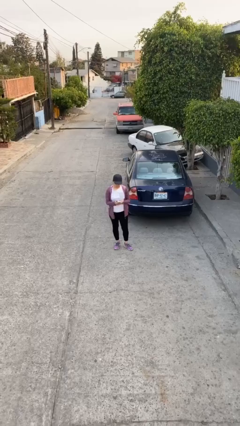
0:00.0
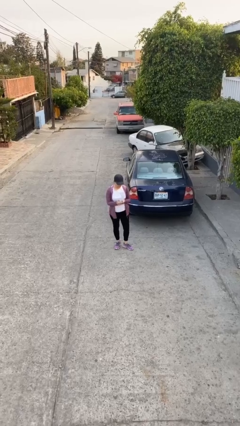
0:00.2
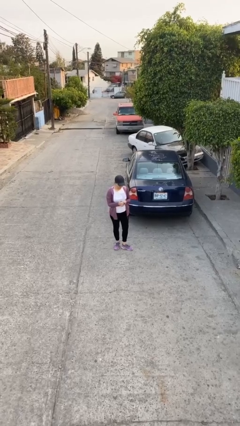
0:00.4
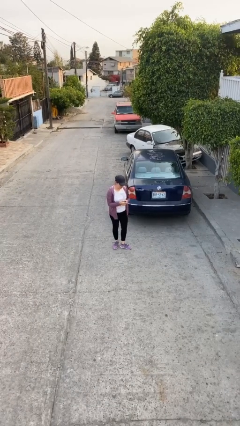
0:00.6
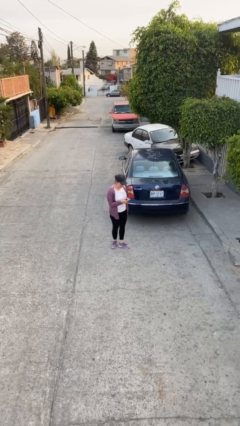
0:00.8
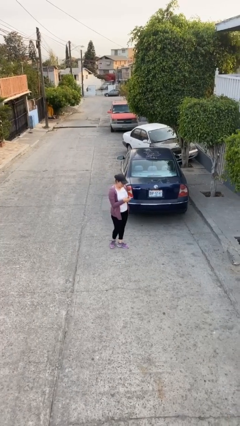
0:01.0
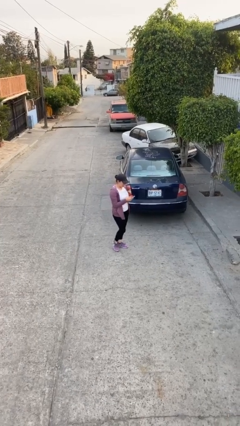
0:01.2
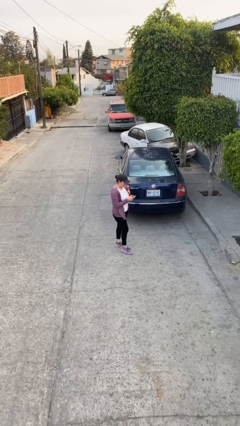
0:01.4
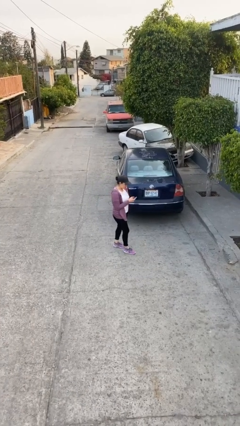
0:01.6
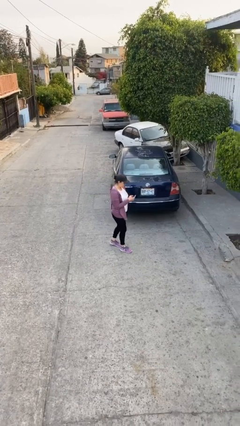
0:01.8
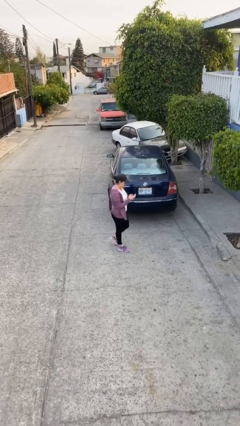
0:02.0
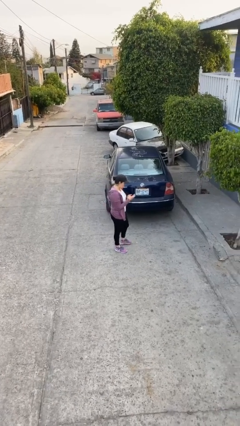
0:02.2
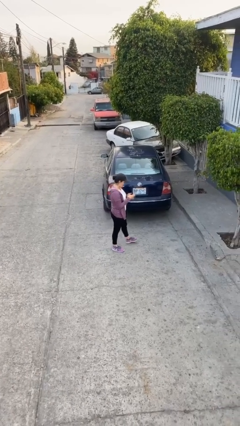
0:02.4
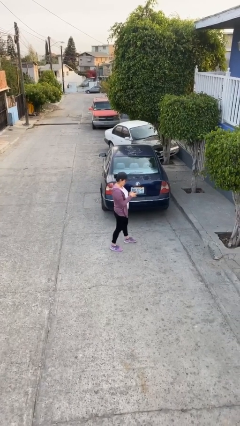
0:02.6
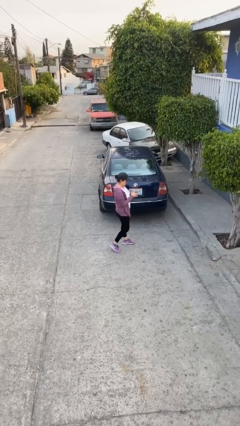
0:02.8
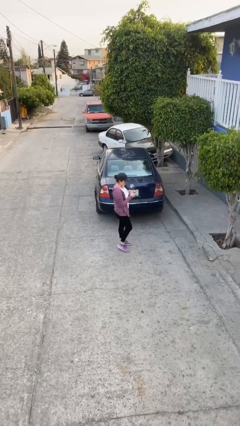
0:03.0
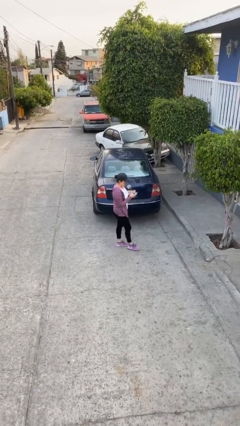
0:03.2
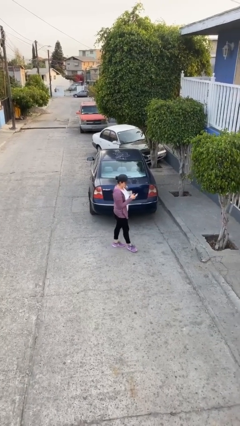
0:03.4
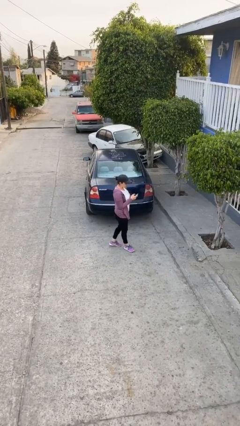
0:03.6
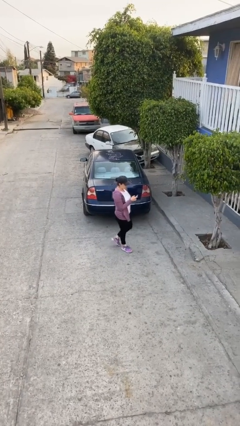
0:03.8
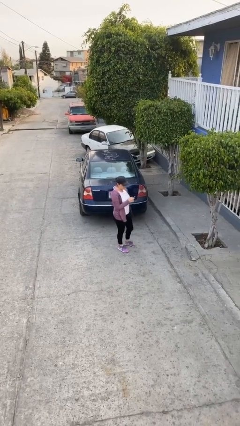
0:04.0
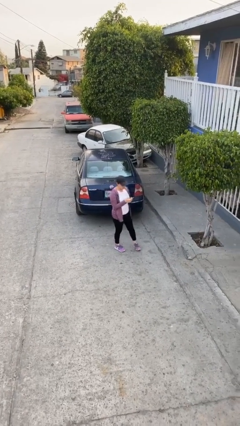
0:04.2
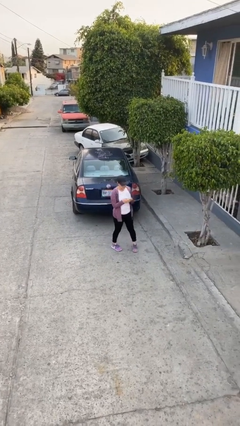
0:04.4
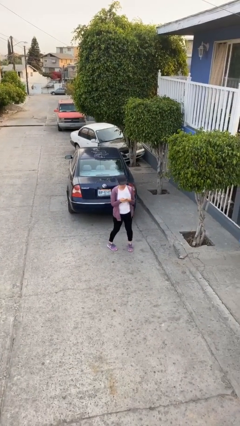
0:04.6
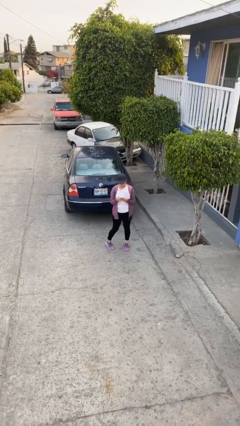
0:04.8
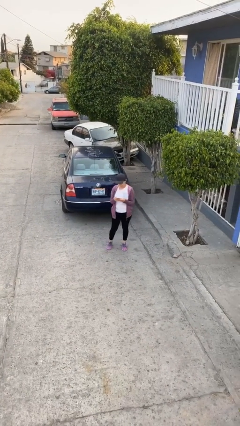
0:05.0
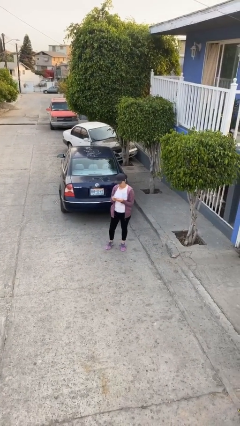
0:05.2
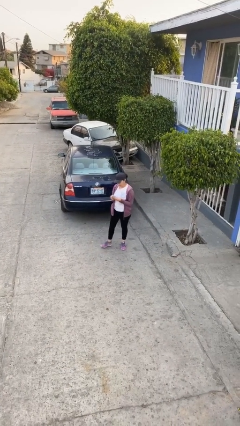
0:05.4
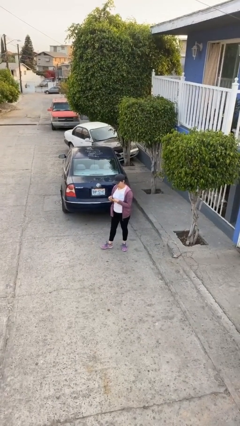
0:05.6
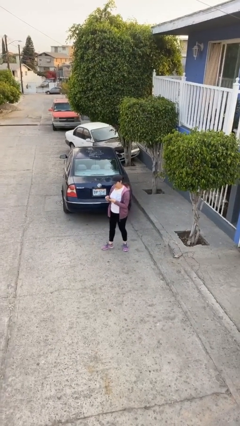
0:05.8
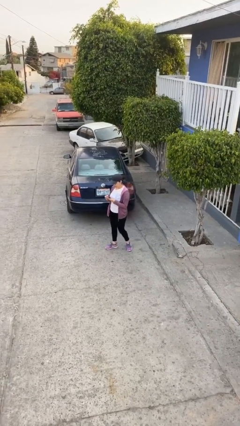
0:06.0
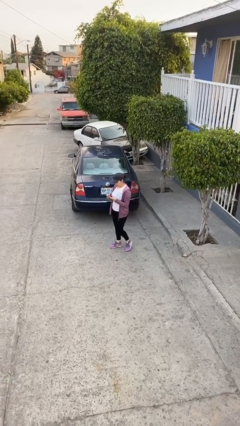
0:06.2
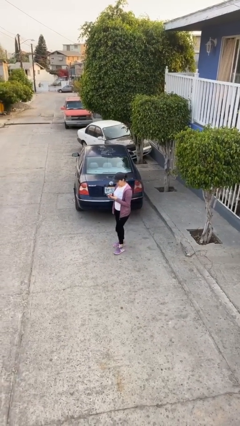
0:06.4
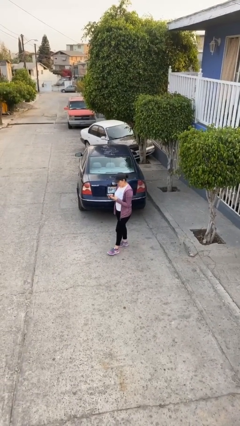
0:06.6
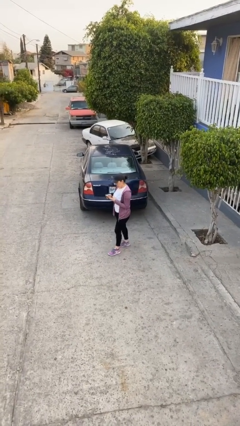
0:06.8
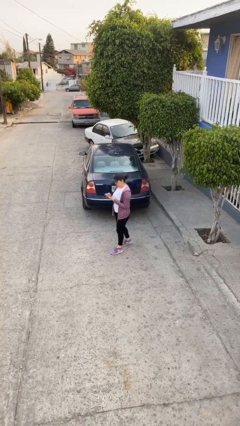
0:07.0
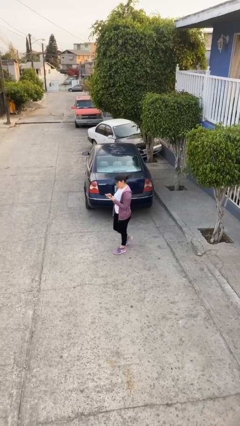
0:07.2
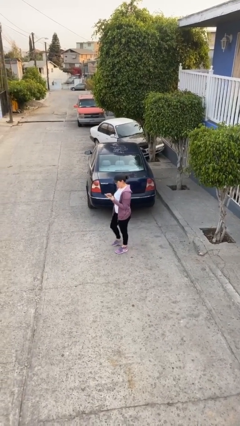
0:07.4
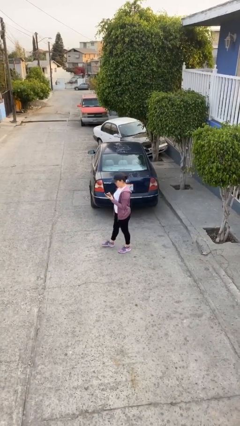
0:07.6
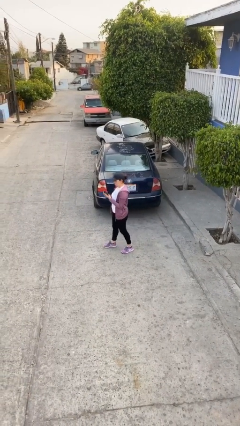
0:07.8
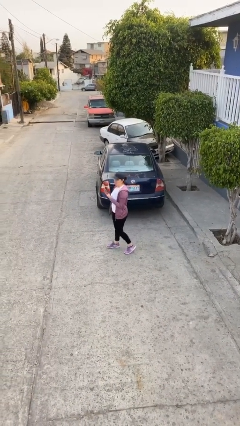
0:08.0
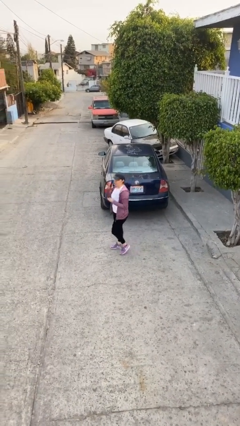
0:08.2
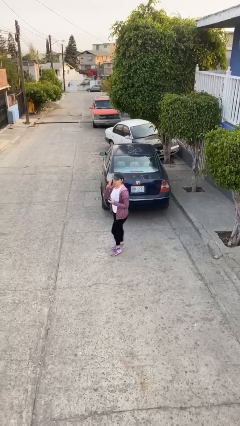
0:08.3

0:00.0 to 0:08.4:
person texts on phone

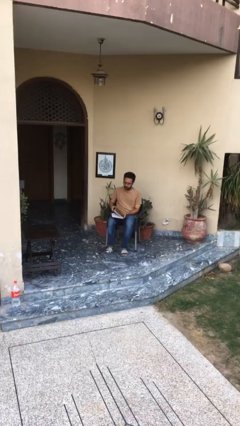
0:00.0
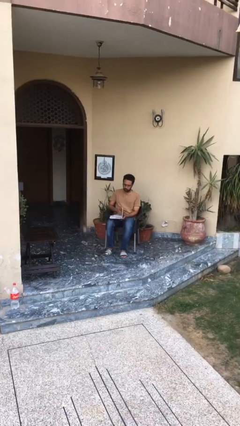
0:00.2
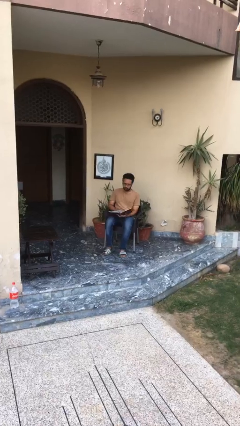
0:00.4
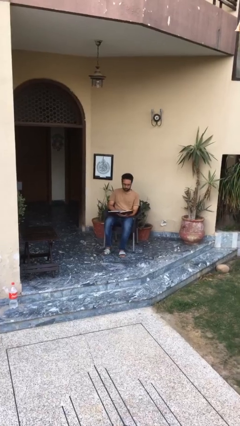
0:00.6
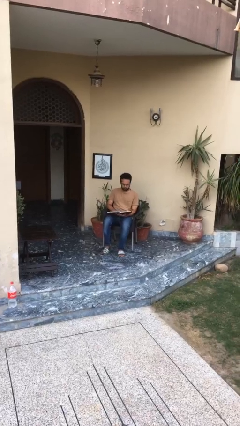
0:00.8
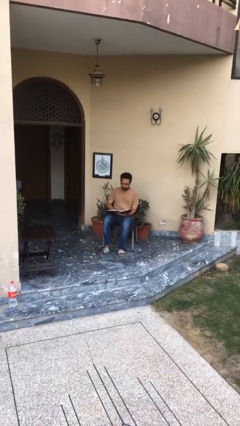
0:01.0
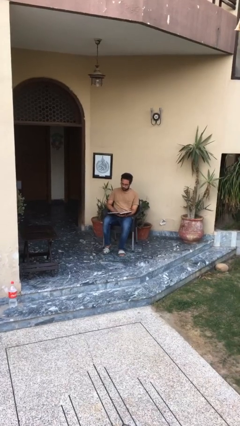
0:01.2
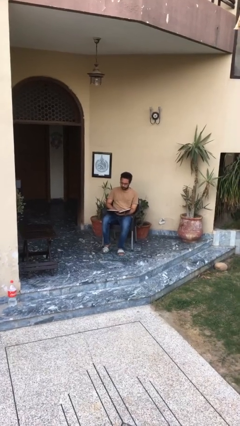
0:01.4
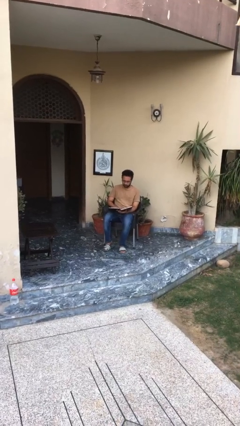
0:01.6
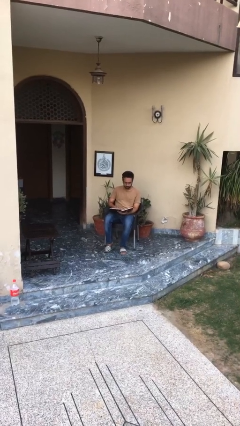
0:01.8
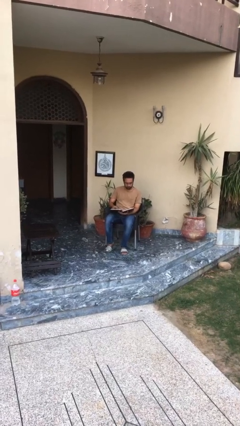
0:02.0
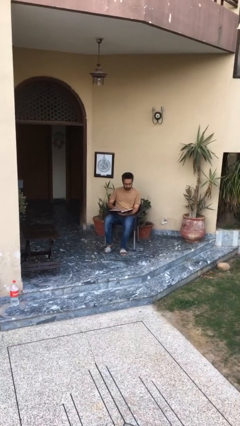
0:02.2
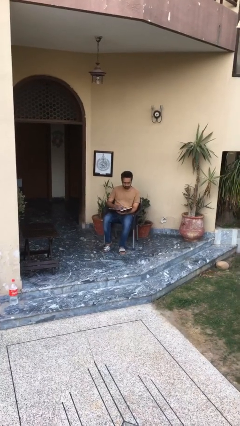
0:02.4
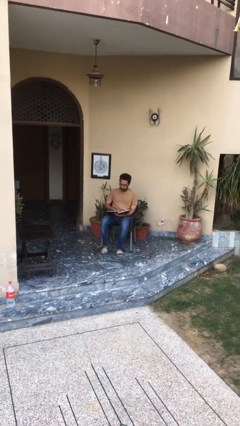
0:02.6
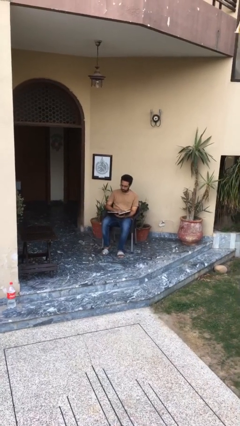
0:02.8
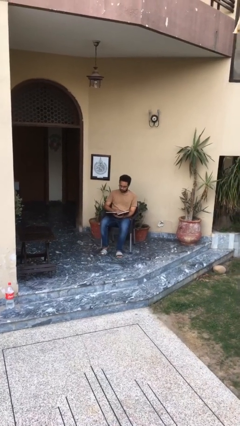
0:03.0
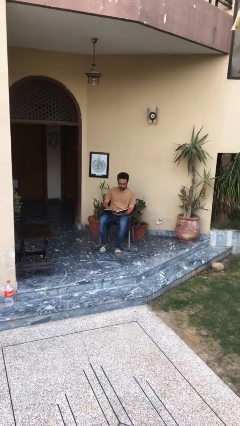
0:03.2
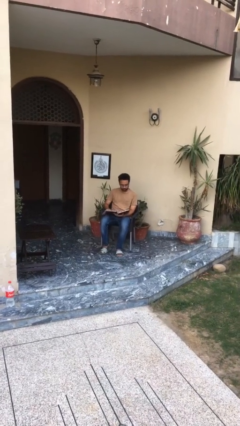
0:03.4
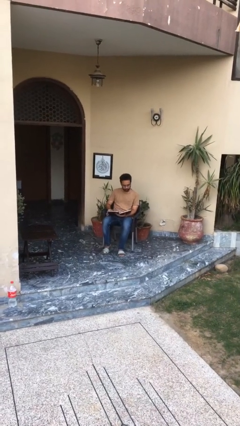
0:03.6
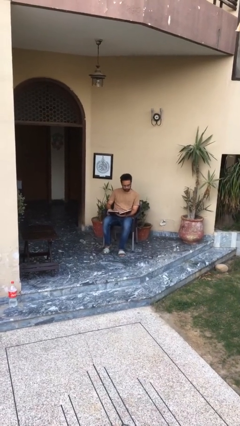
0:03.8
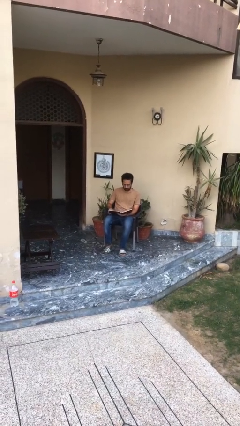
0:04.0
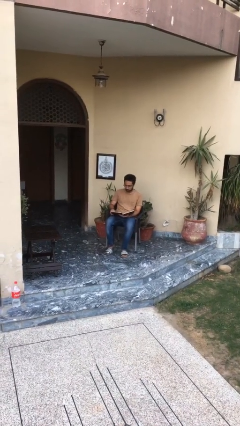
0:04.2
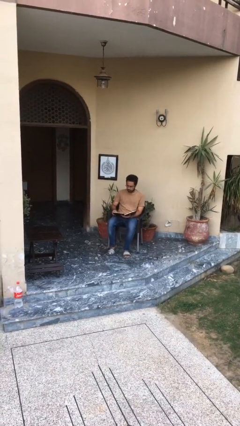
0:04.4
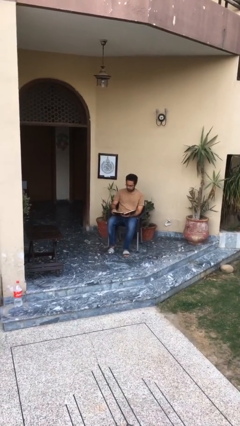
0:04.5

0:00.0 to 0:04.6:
person reads document

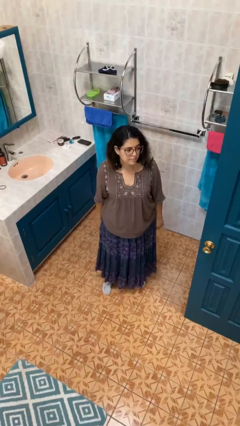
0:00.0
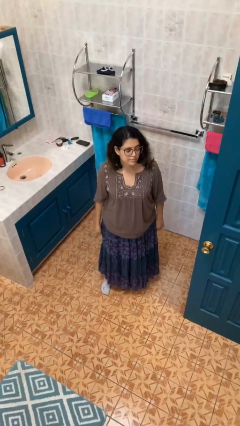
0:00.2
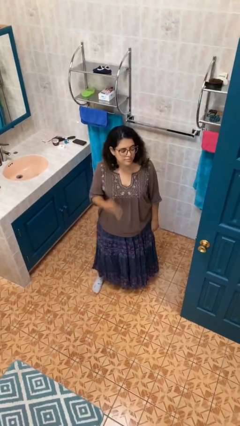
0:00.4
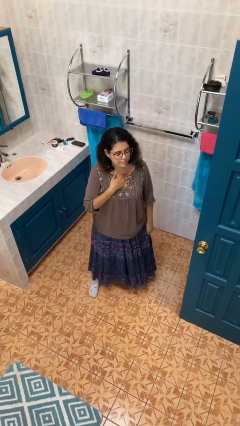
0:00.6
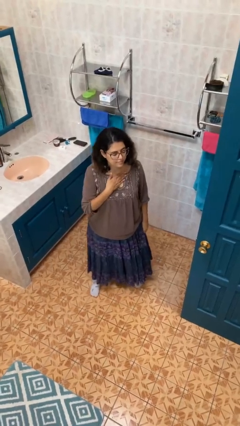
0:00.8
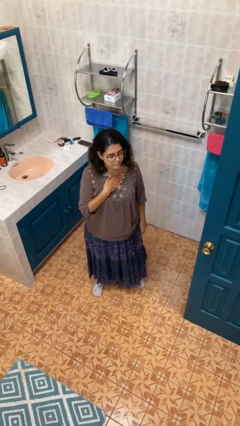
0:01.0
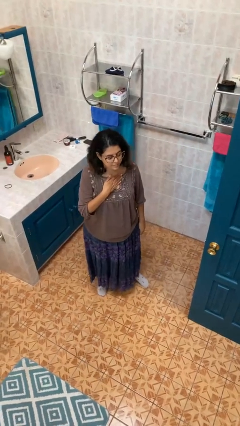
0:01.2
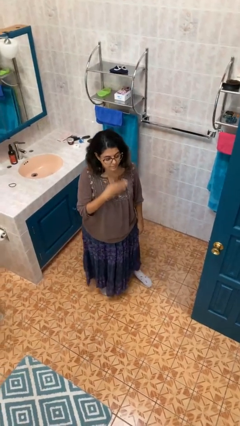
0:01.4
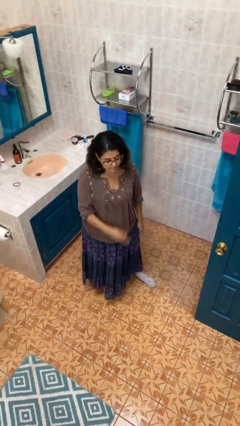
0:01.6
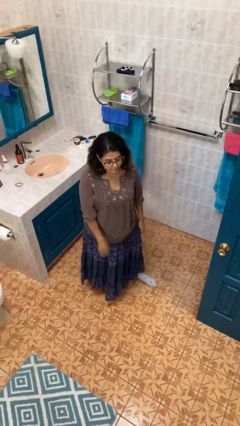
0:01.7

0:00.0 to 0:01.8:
person drums on chest

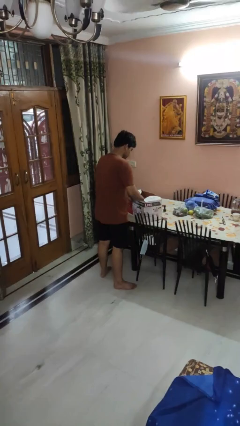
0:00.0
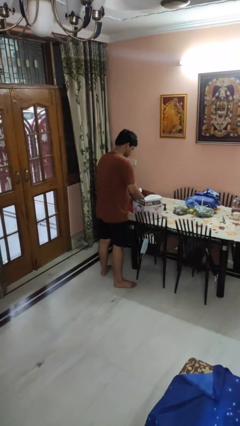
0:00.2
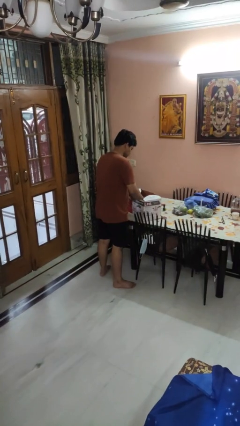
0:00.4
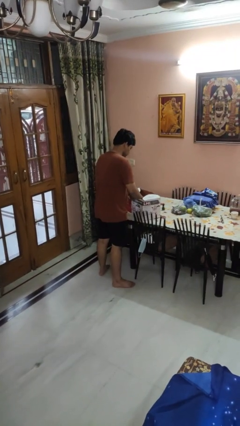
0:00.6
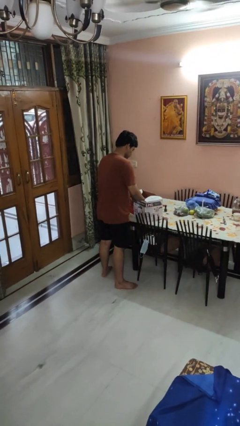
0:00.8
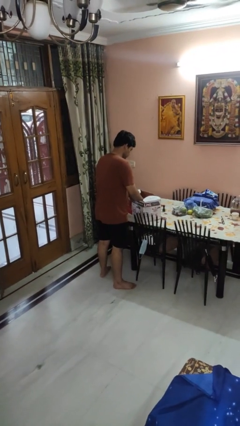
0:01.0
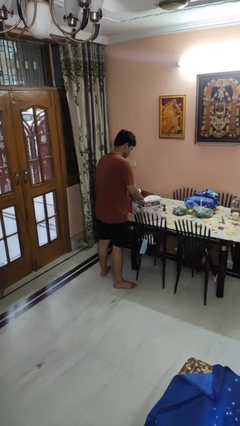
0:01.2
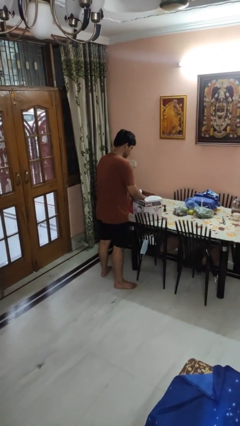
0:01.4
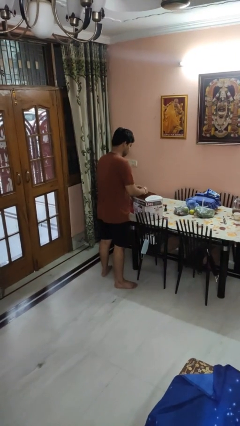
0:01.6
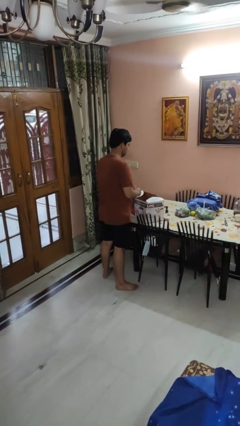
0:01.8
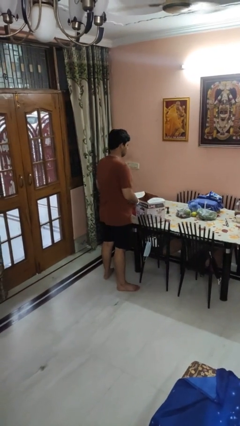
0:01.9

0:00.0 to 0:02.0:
person searches in box

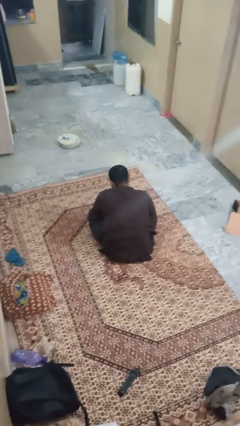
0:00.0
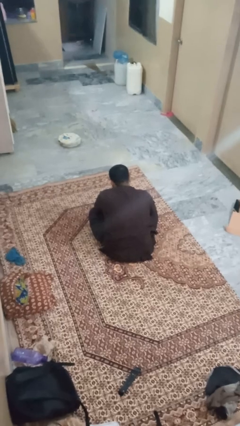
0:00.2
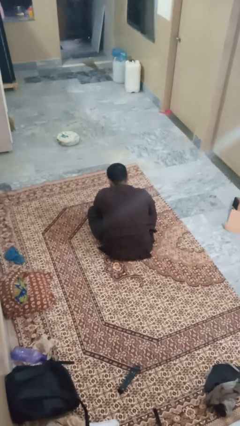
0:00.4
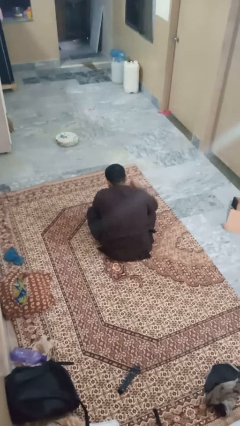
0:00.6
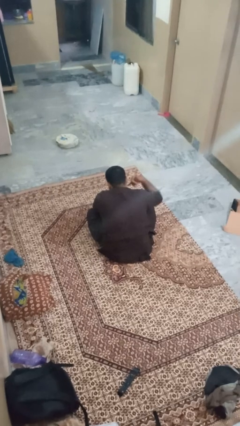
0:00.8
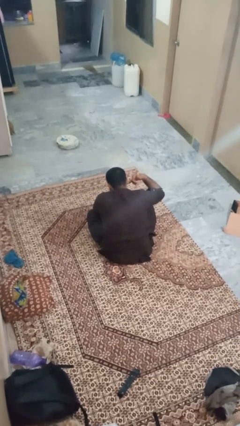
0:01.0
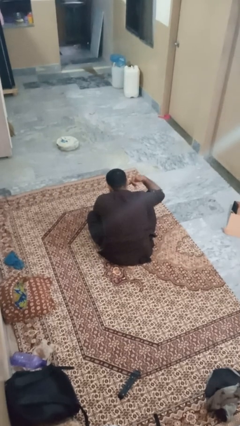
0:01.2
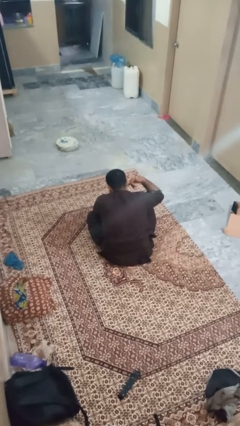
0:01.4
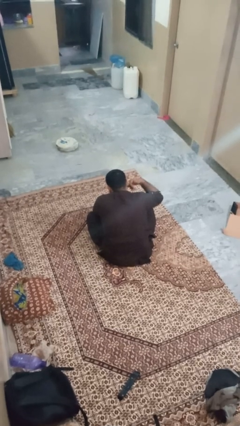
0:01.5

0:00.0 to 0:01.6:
person gestures call me
